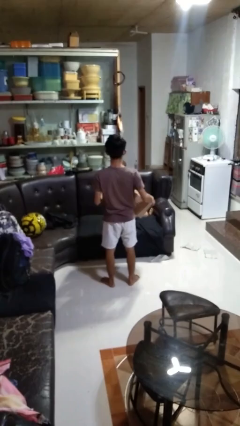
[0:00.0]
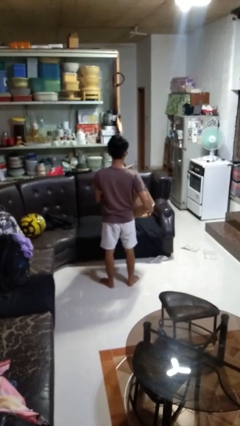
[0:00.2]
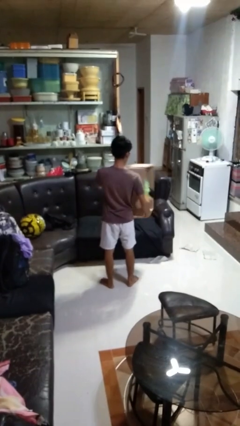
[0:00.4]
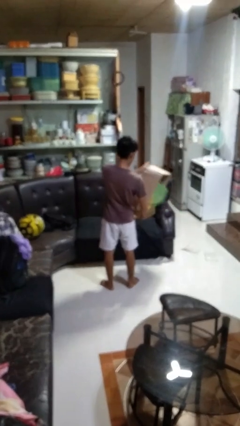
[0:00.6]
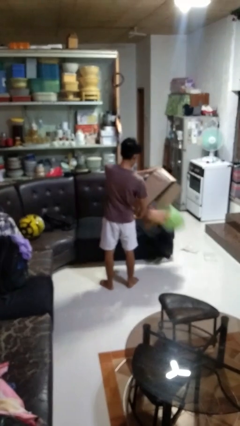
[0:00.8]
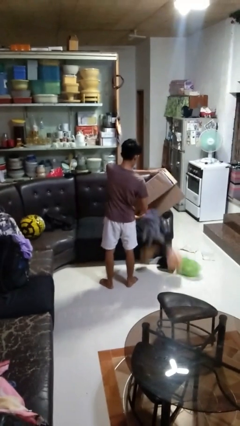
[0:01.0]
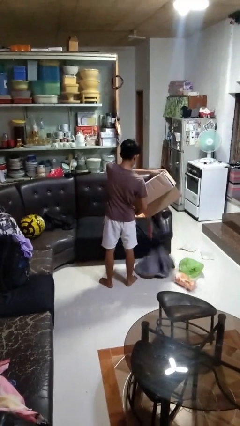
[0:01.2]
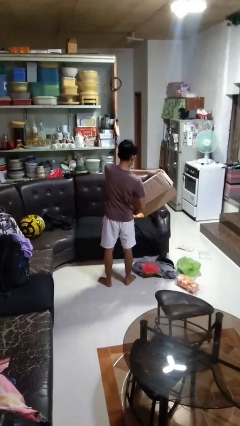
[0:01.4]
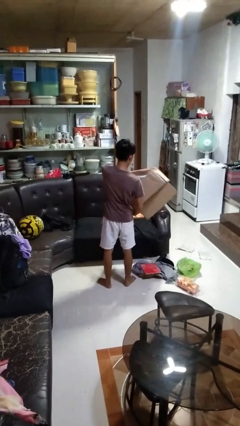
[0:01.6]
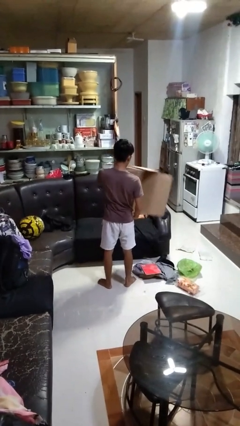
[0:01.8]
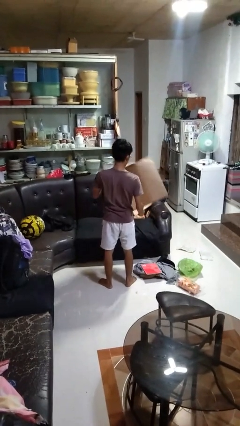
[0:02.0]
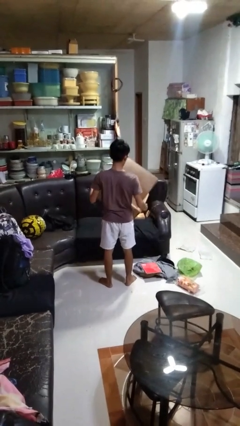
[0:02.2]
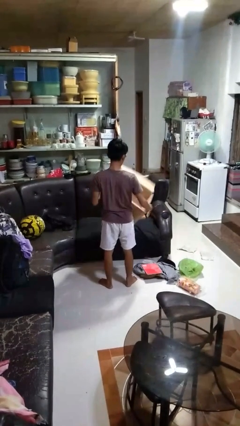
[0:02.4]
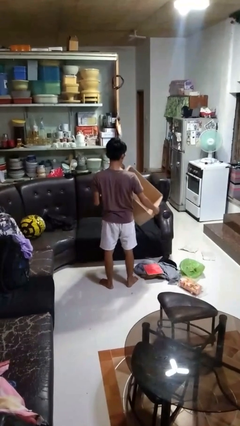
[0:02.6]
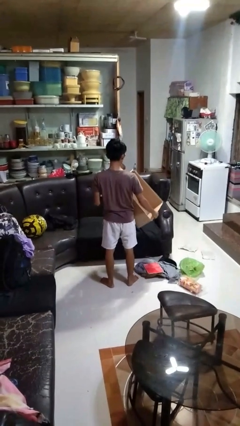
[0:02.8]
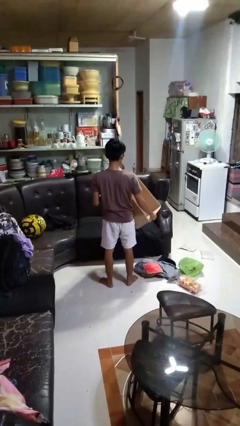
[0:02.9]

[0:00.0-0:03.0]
person unloads box onto floor

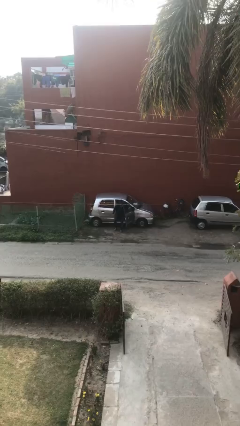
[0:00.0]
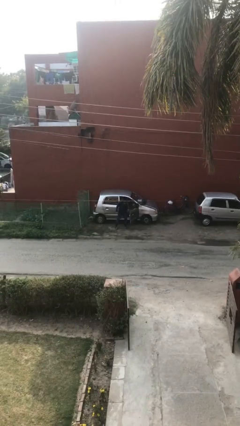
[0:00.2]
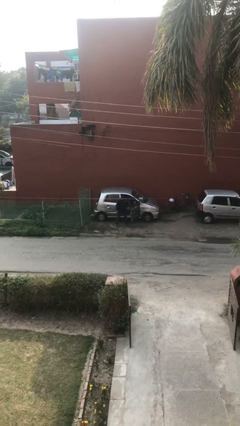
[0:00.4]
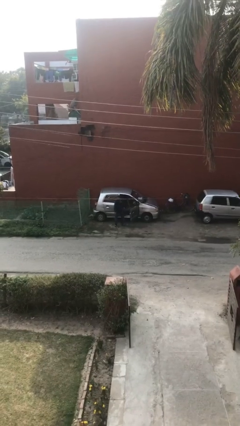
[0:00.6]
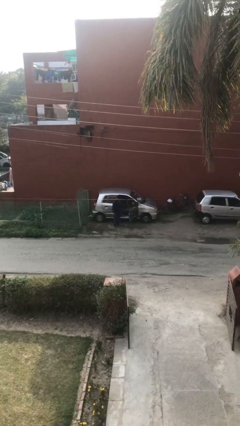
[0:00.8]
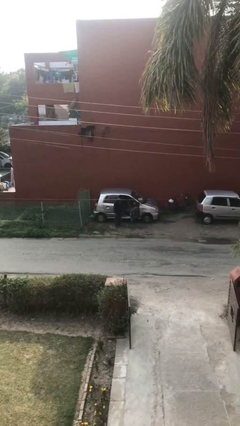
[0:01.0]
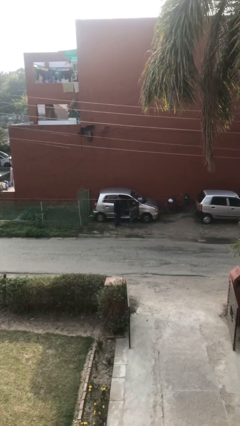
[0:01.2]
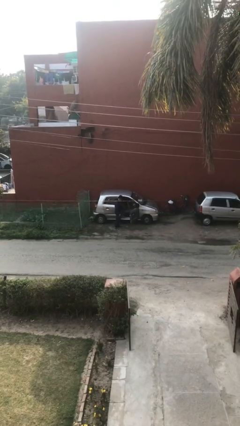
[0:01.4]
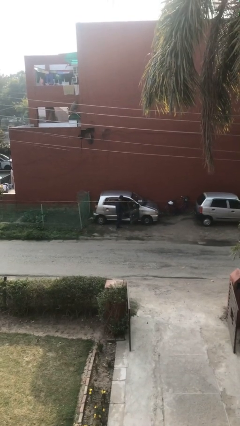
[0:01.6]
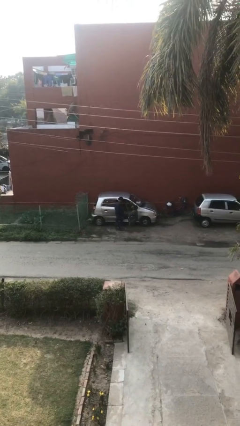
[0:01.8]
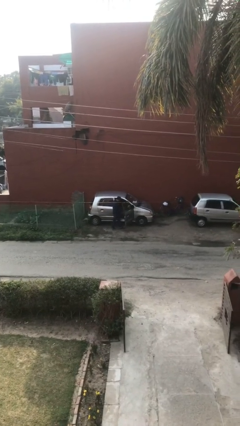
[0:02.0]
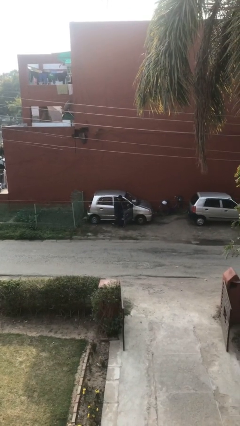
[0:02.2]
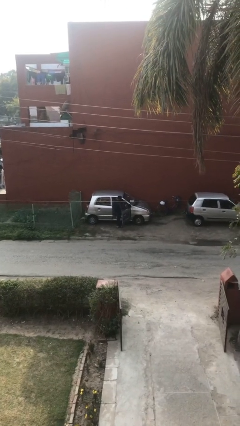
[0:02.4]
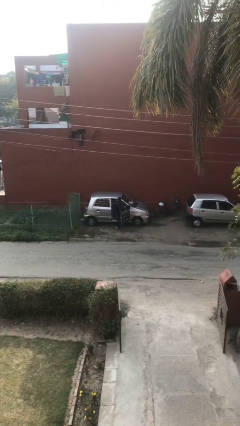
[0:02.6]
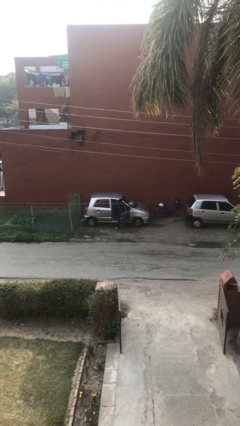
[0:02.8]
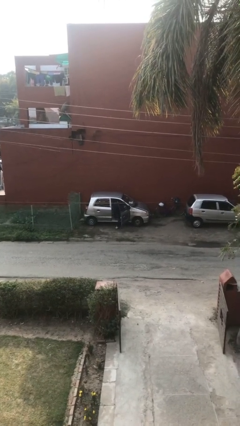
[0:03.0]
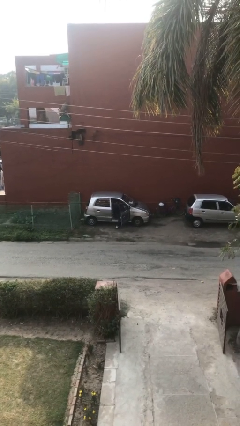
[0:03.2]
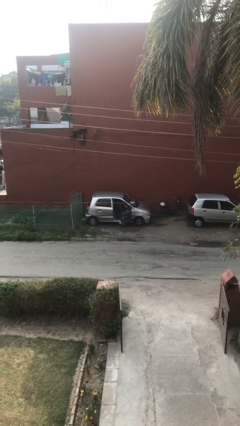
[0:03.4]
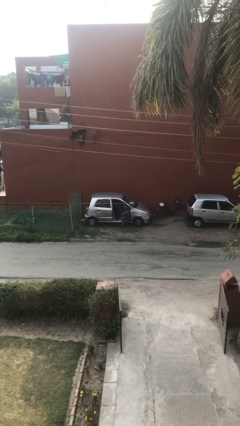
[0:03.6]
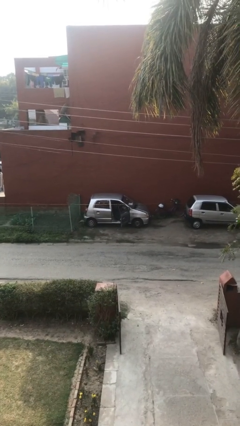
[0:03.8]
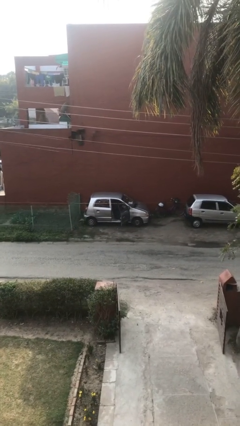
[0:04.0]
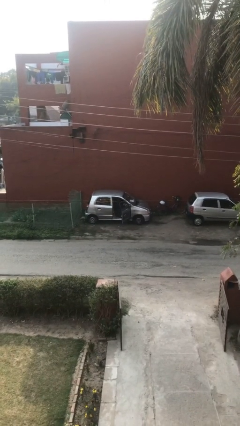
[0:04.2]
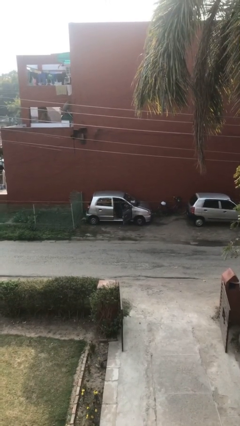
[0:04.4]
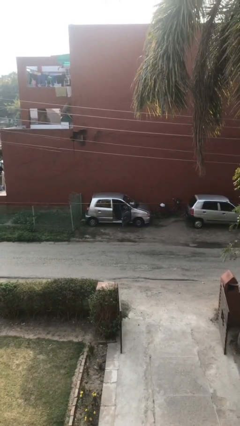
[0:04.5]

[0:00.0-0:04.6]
person enters car

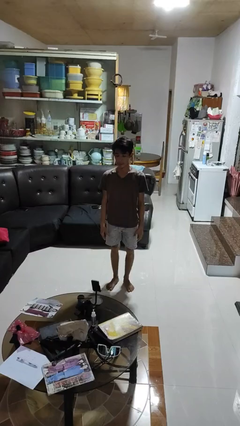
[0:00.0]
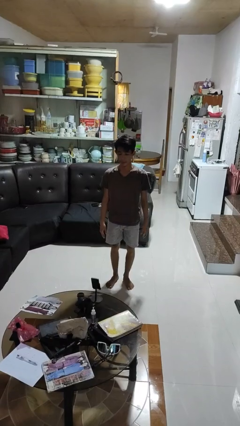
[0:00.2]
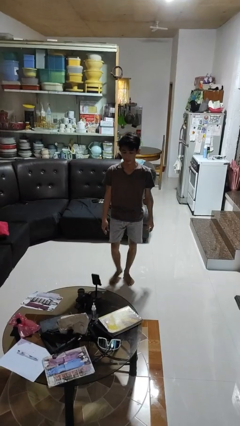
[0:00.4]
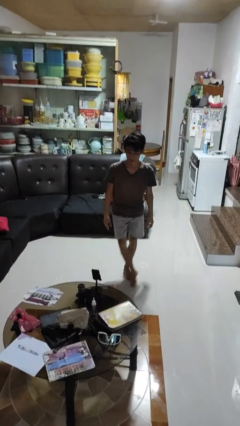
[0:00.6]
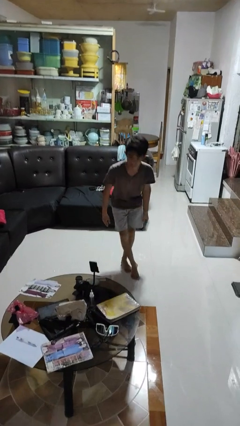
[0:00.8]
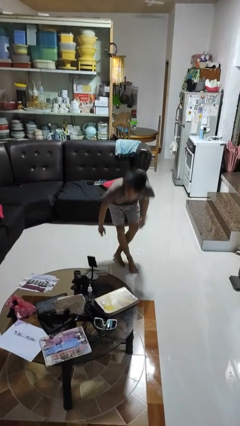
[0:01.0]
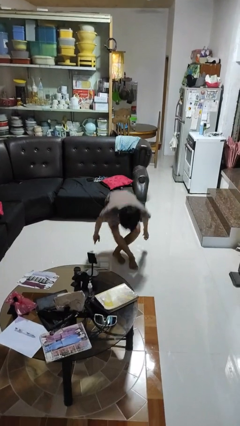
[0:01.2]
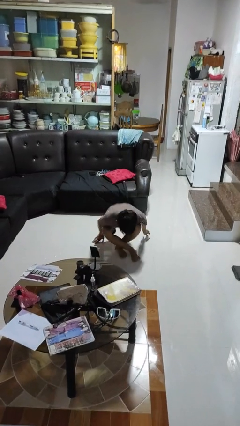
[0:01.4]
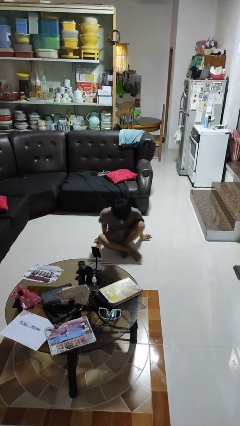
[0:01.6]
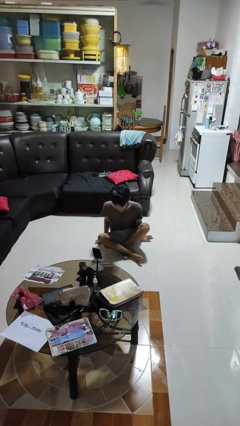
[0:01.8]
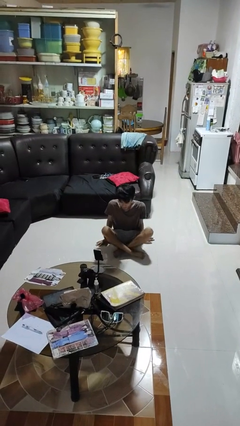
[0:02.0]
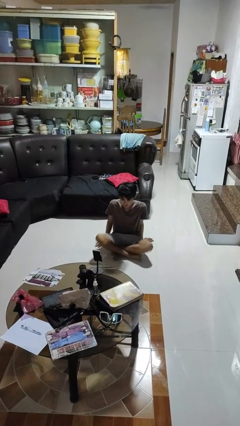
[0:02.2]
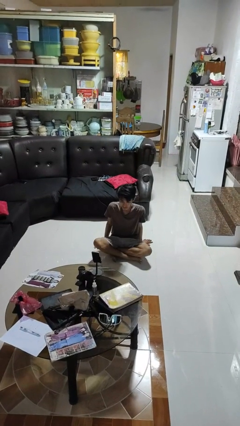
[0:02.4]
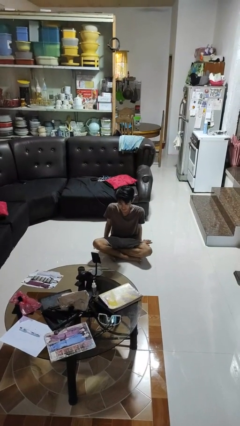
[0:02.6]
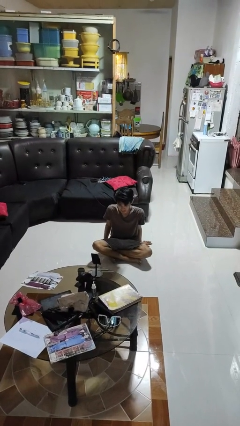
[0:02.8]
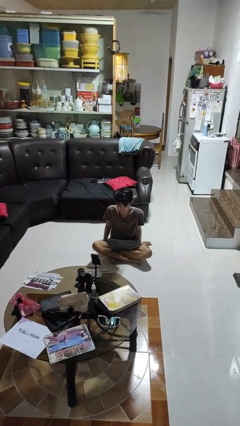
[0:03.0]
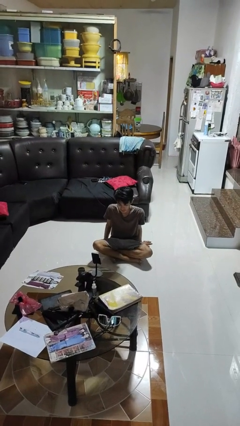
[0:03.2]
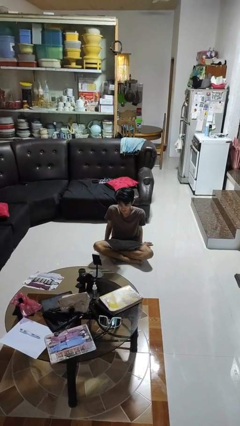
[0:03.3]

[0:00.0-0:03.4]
person sits crisscross

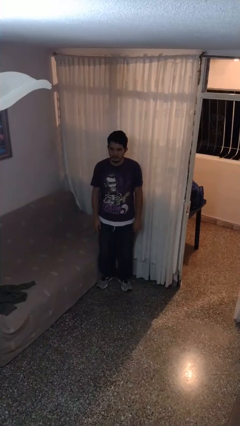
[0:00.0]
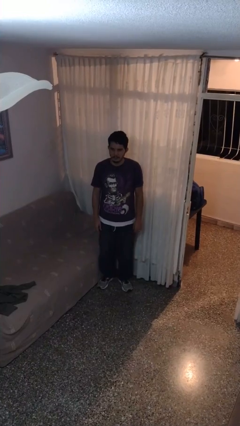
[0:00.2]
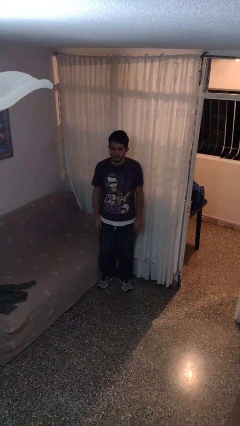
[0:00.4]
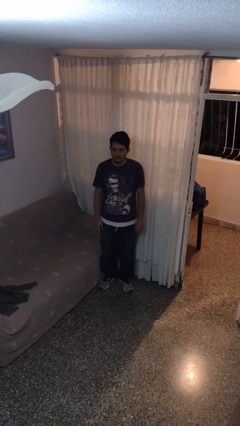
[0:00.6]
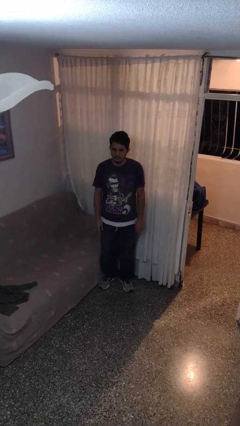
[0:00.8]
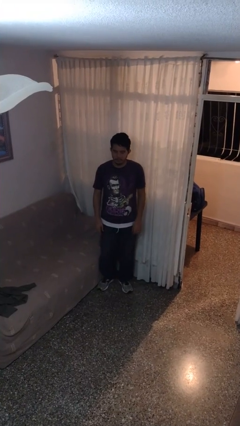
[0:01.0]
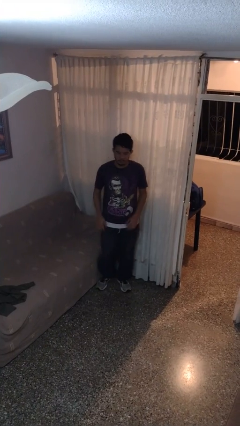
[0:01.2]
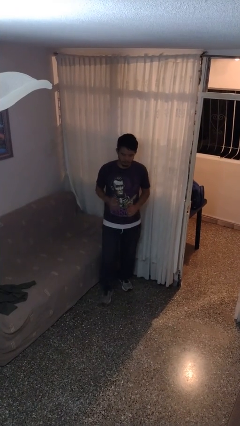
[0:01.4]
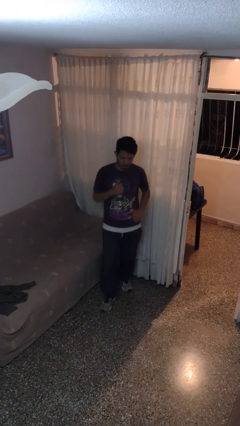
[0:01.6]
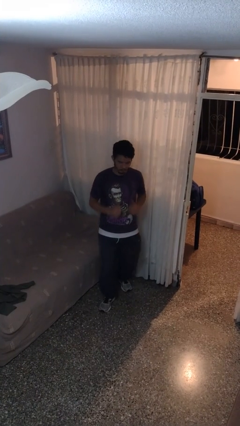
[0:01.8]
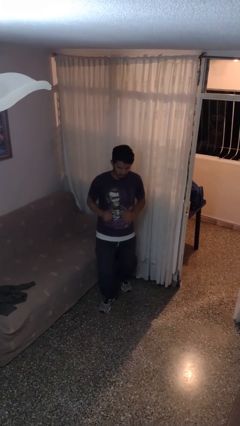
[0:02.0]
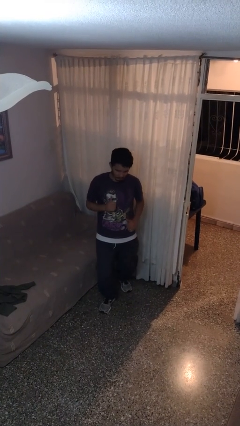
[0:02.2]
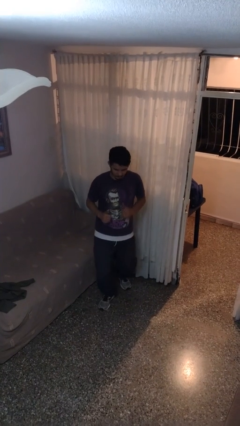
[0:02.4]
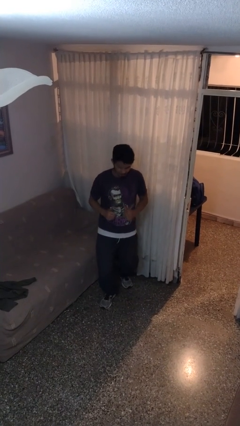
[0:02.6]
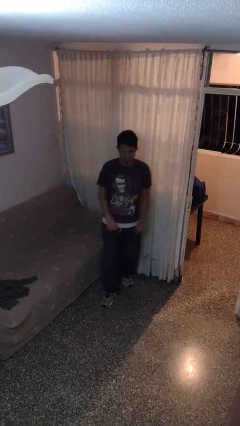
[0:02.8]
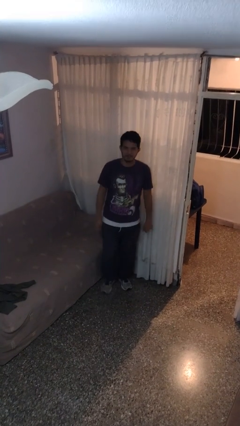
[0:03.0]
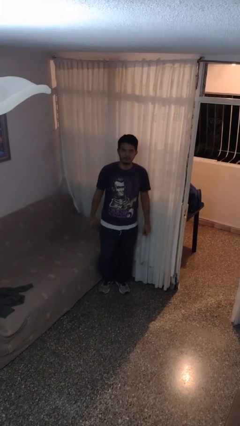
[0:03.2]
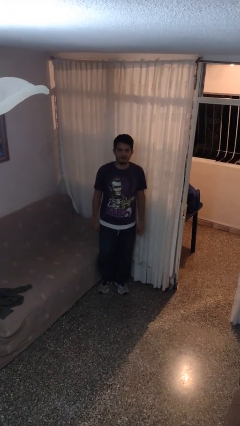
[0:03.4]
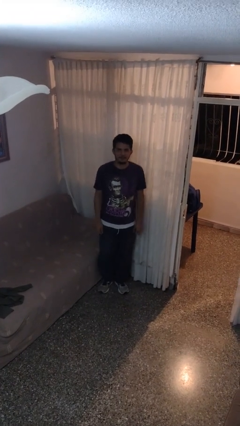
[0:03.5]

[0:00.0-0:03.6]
person dances in place

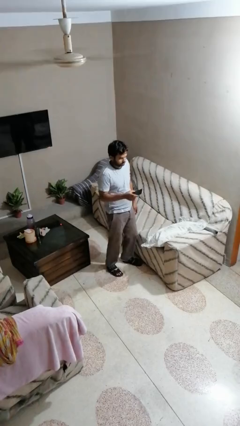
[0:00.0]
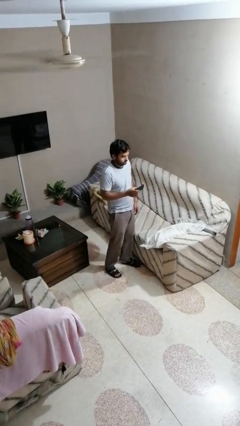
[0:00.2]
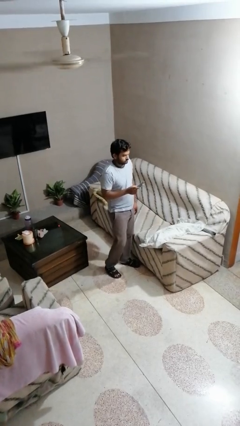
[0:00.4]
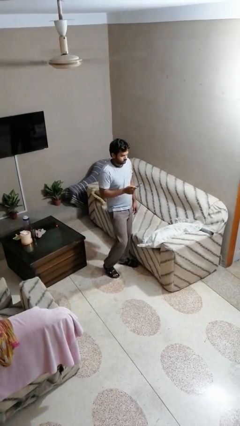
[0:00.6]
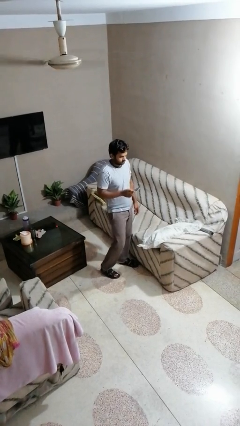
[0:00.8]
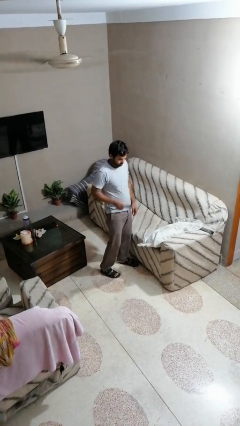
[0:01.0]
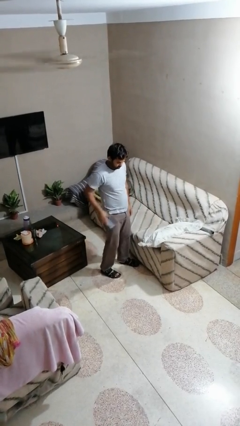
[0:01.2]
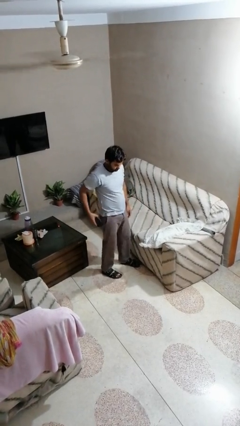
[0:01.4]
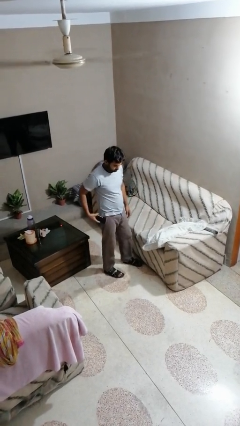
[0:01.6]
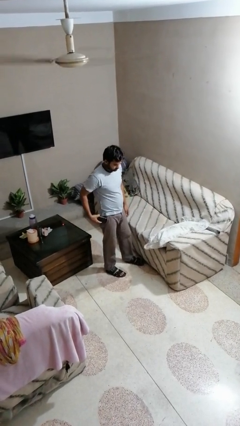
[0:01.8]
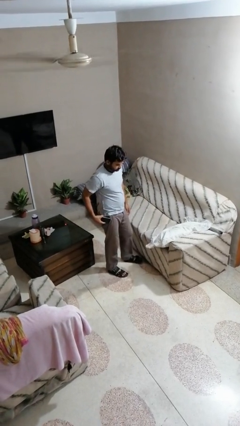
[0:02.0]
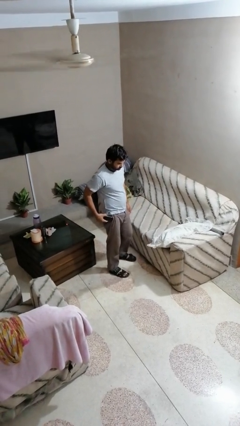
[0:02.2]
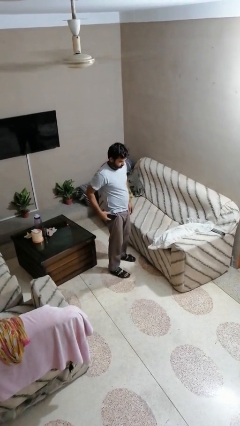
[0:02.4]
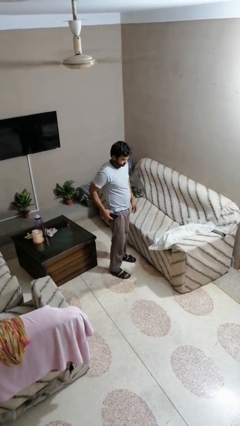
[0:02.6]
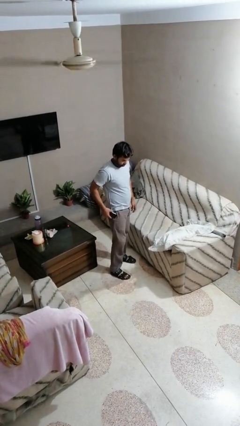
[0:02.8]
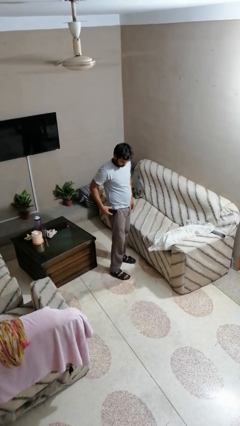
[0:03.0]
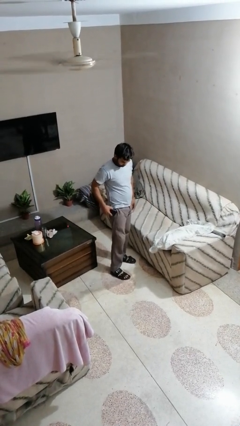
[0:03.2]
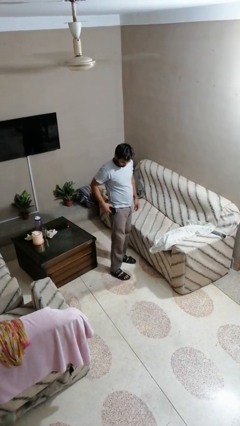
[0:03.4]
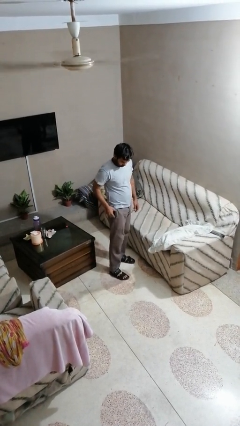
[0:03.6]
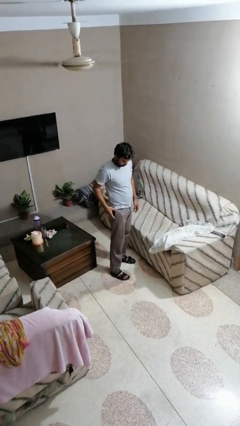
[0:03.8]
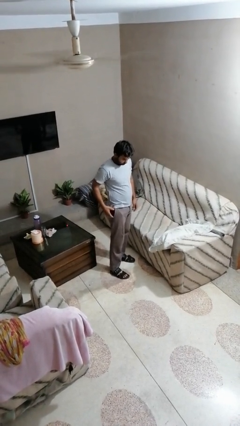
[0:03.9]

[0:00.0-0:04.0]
person puts phone into pocket
